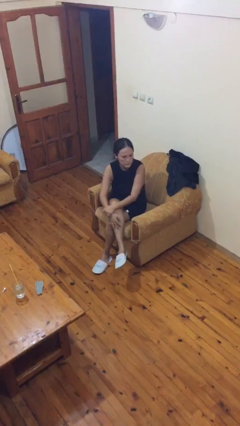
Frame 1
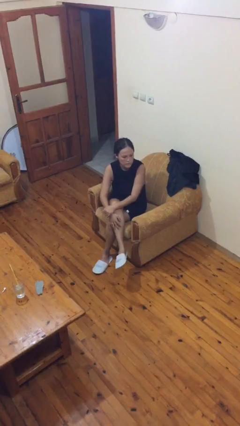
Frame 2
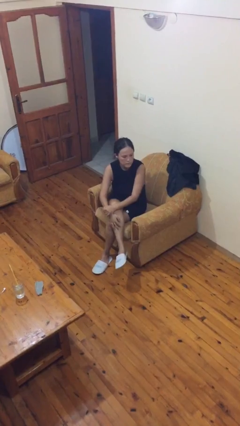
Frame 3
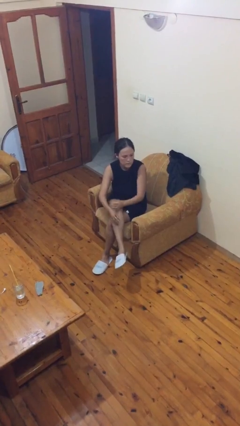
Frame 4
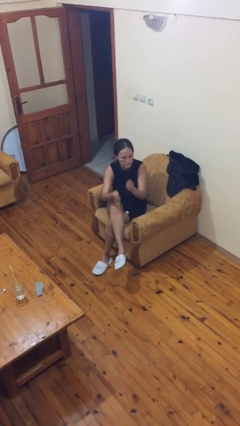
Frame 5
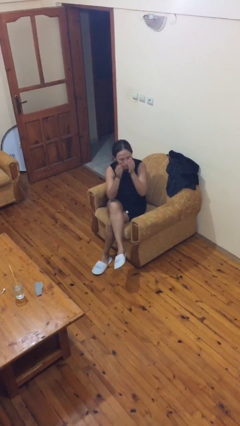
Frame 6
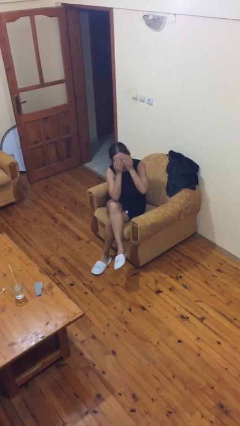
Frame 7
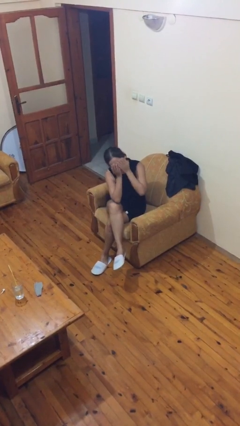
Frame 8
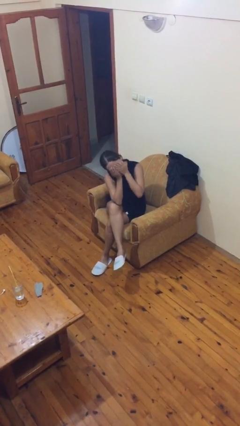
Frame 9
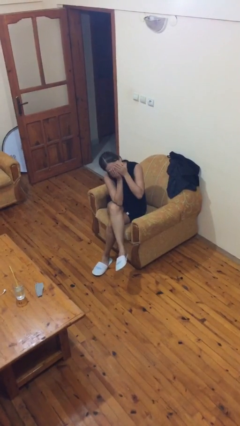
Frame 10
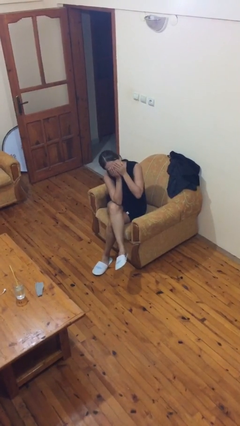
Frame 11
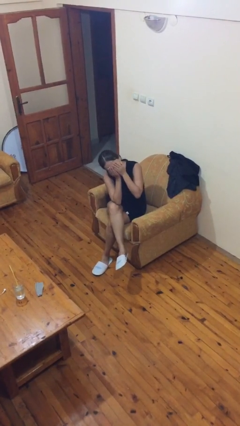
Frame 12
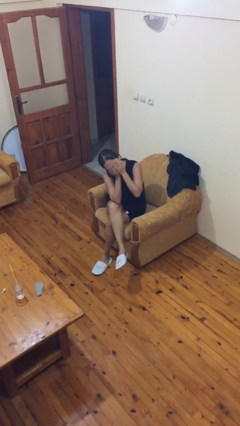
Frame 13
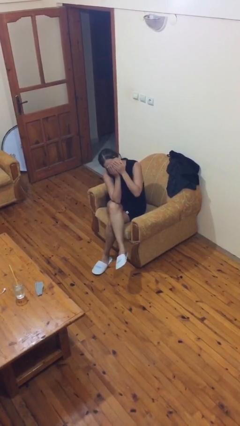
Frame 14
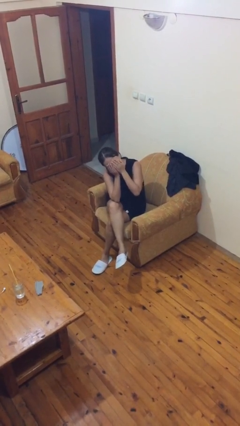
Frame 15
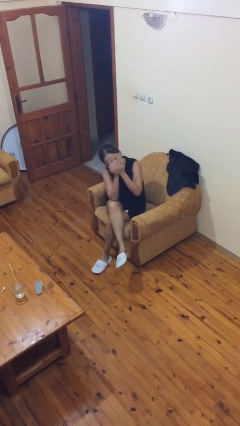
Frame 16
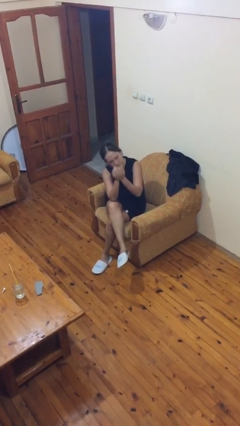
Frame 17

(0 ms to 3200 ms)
person covers face with hands

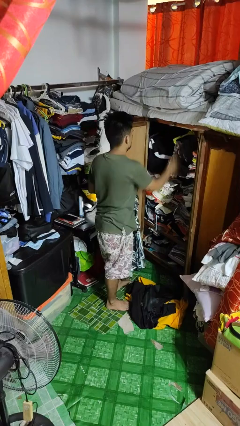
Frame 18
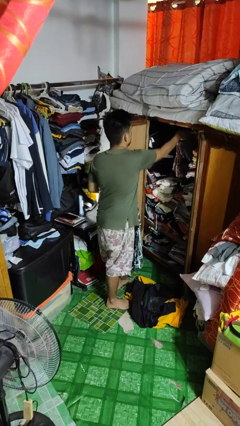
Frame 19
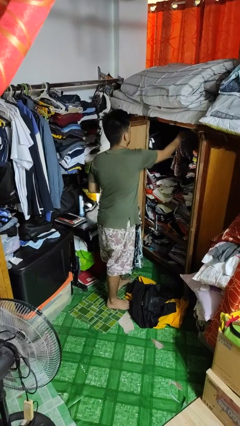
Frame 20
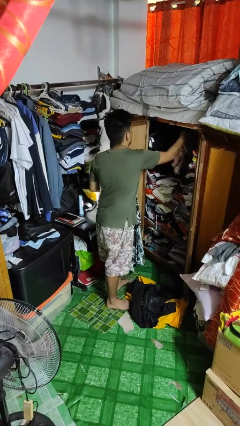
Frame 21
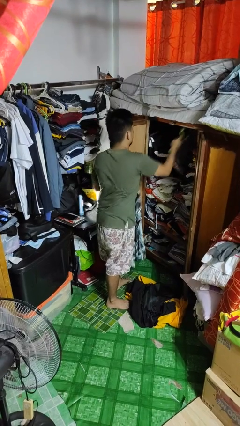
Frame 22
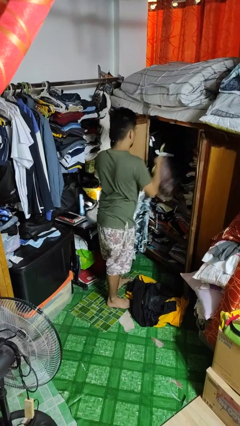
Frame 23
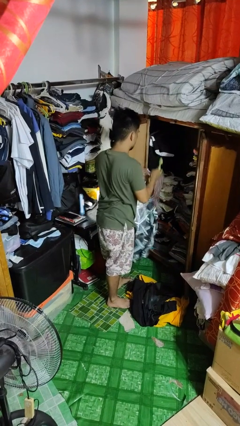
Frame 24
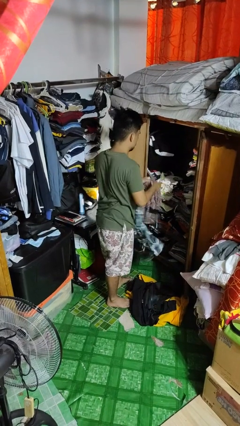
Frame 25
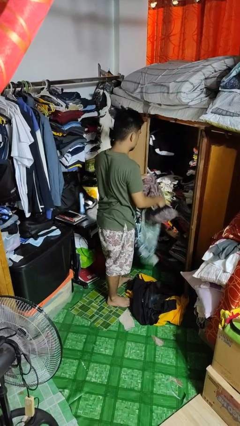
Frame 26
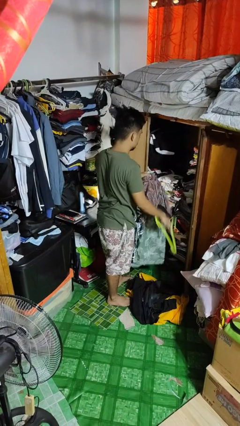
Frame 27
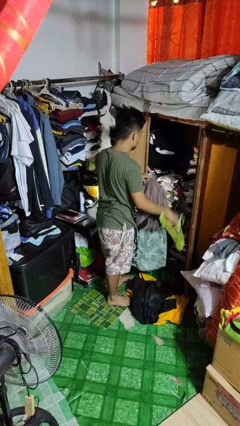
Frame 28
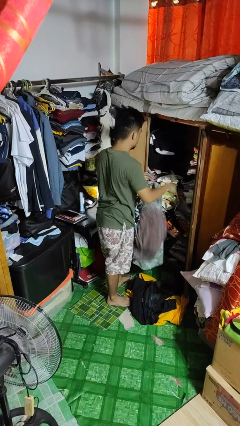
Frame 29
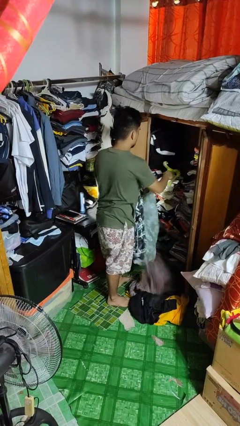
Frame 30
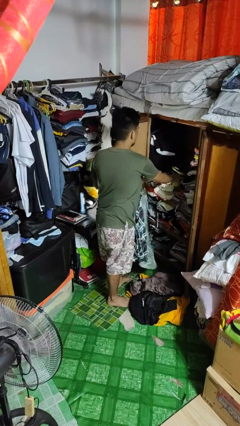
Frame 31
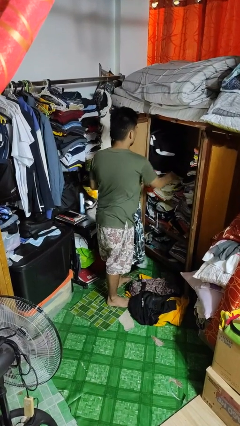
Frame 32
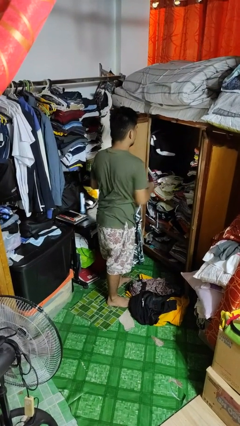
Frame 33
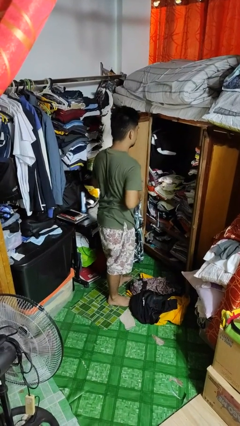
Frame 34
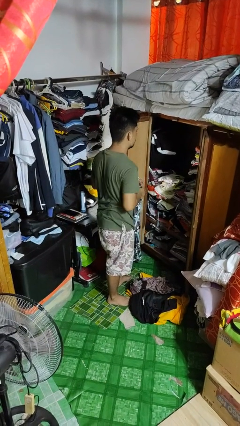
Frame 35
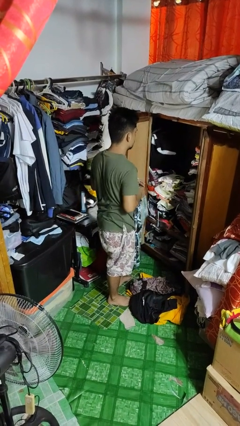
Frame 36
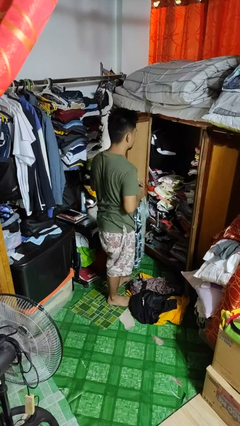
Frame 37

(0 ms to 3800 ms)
person takes clothes from closet

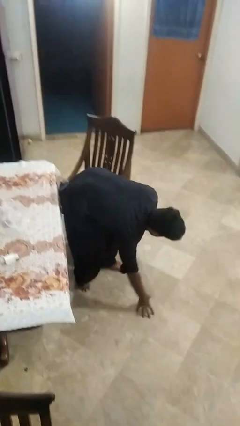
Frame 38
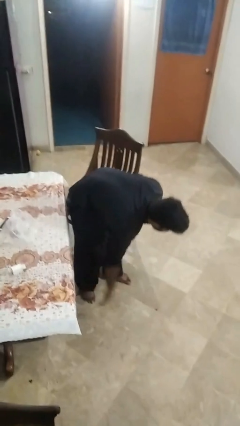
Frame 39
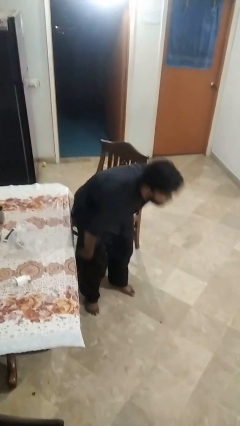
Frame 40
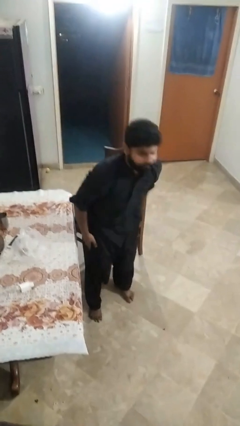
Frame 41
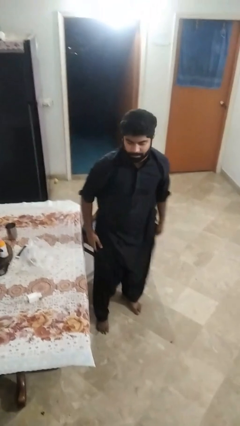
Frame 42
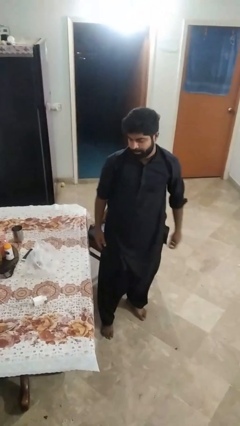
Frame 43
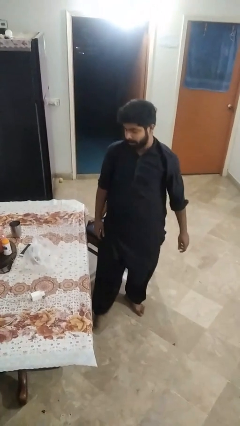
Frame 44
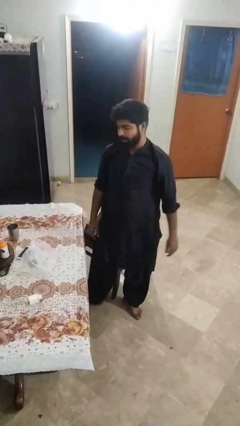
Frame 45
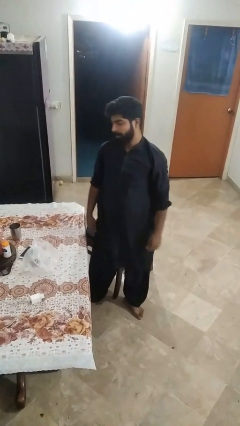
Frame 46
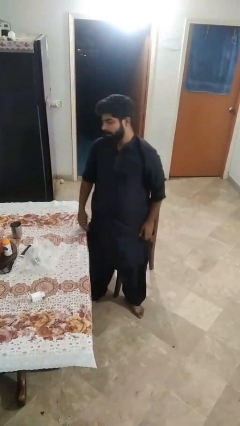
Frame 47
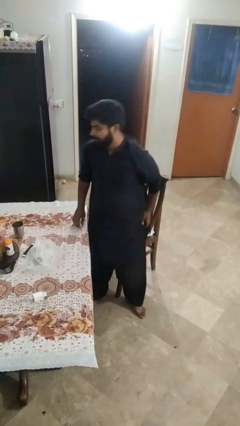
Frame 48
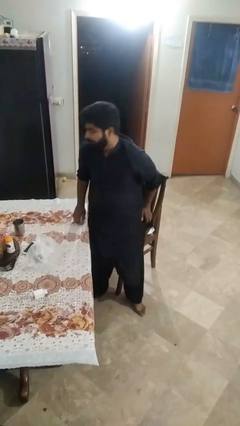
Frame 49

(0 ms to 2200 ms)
person stands up from floor

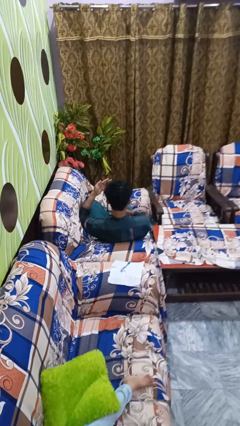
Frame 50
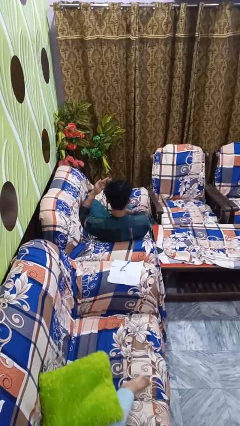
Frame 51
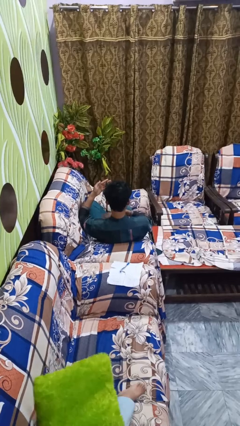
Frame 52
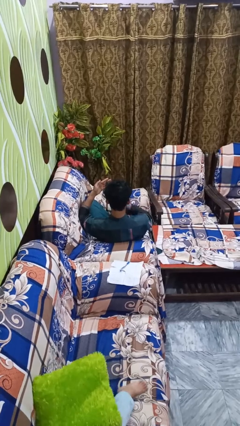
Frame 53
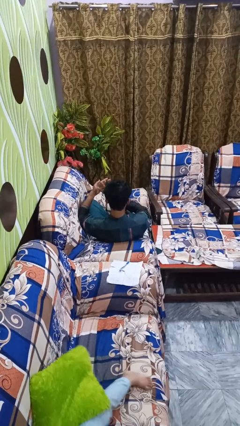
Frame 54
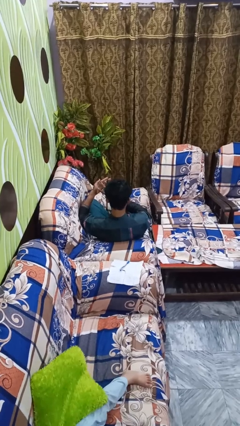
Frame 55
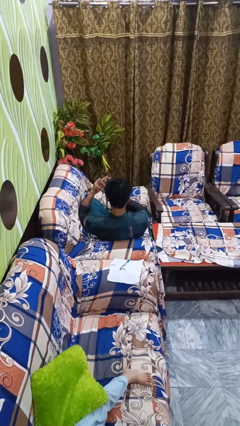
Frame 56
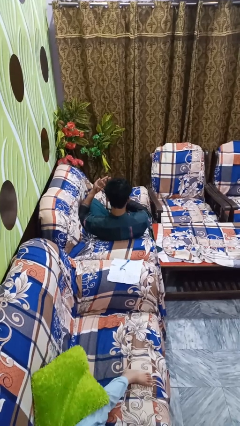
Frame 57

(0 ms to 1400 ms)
person gestures number three

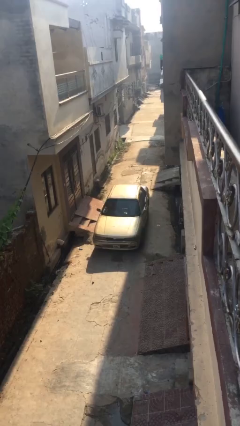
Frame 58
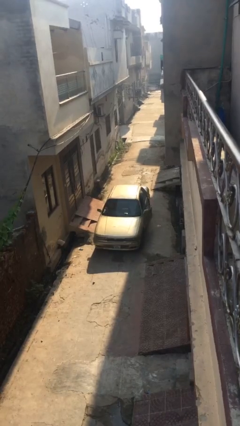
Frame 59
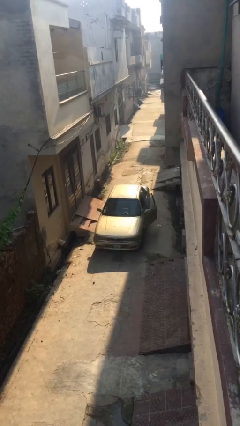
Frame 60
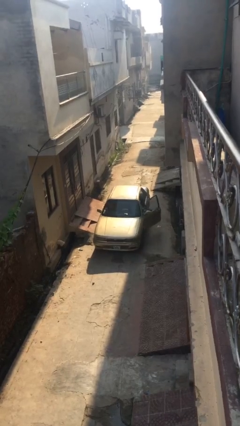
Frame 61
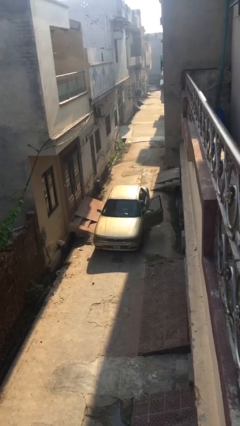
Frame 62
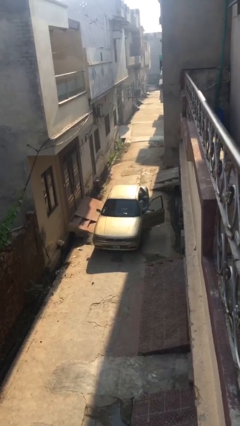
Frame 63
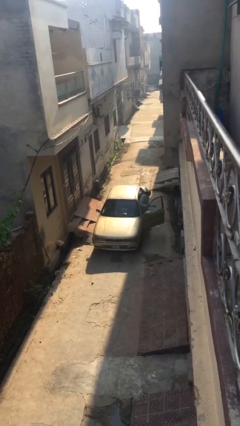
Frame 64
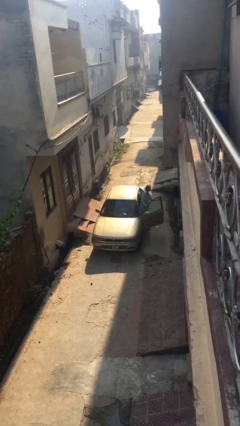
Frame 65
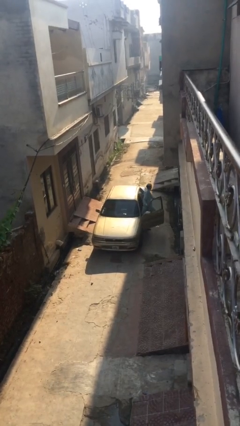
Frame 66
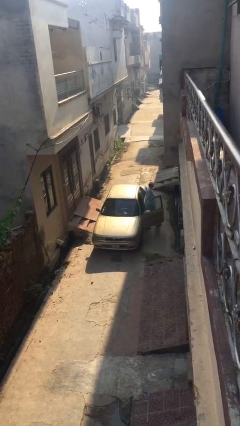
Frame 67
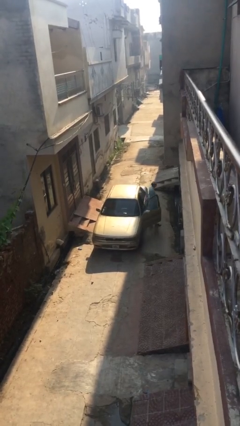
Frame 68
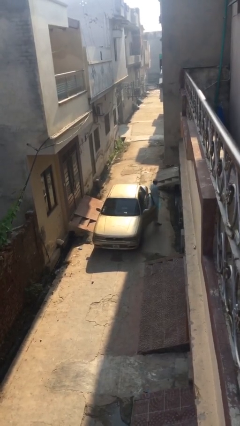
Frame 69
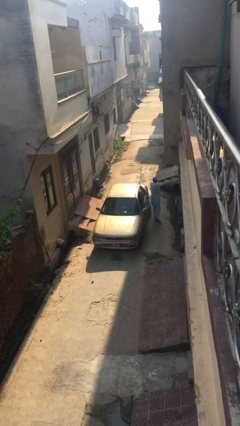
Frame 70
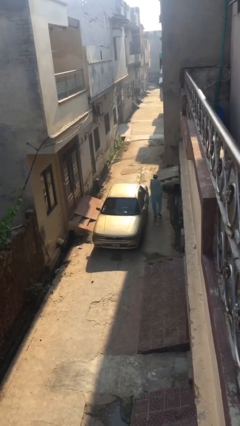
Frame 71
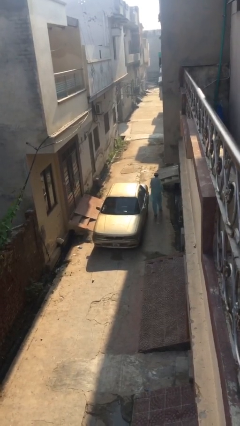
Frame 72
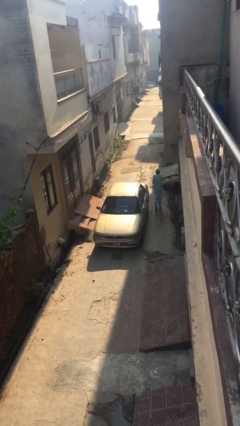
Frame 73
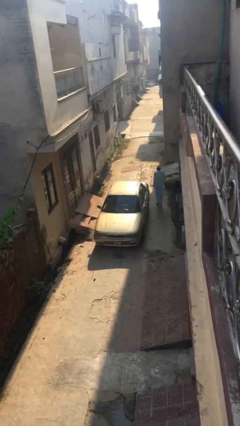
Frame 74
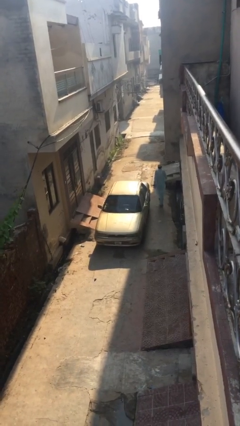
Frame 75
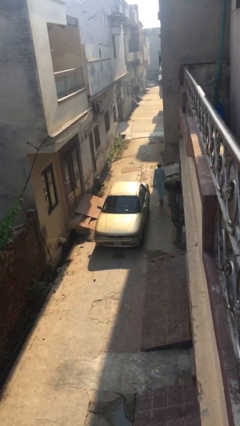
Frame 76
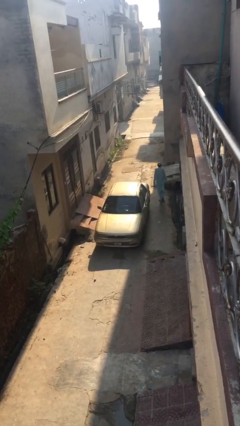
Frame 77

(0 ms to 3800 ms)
car drops off person

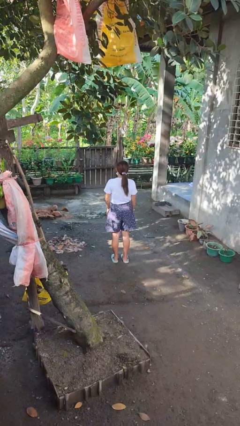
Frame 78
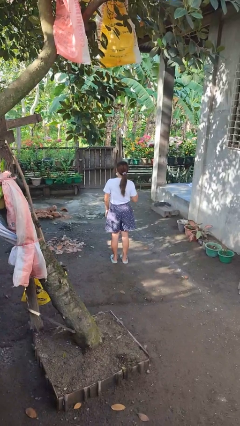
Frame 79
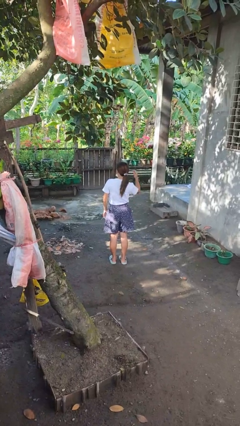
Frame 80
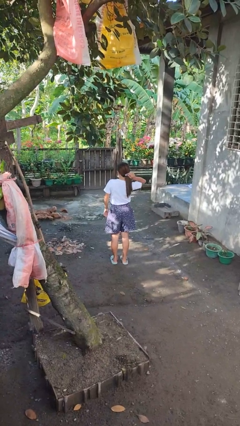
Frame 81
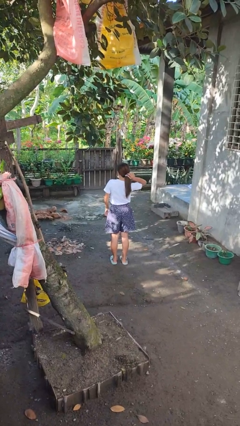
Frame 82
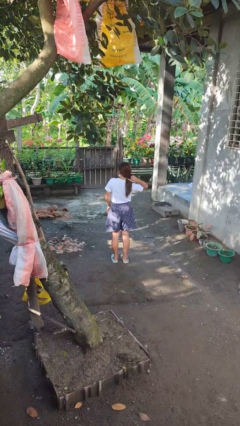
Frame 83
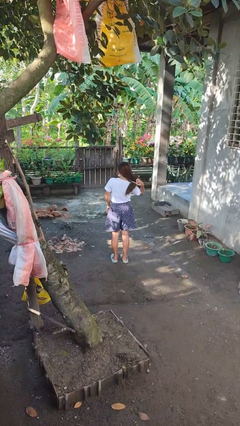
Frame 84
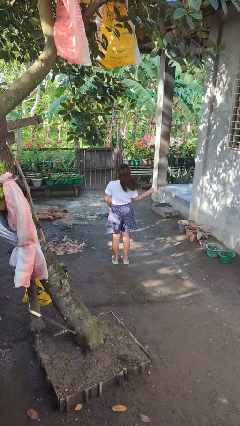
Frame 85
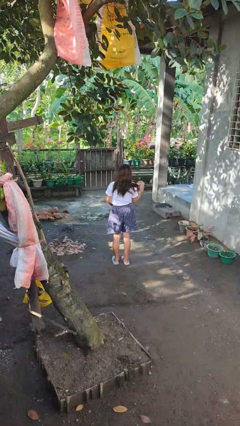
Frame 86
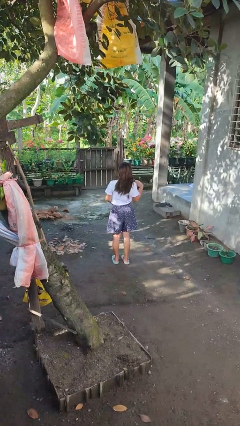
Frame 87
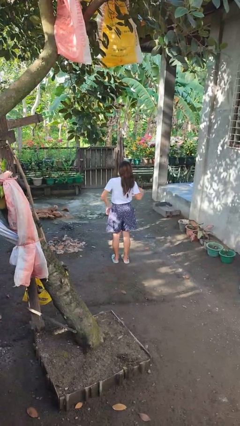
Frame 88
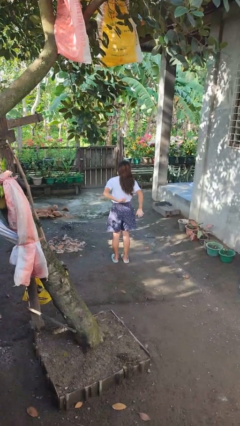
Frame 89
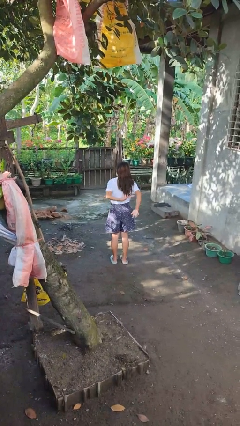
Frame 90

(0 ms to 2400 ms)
person takes off hairtie

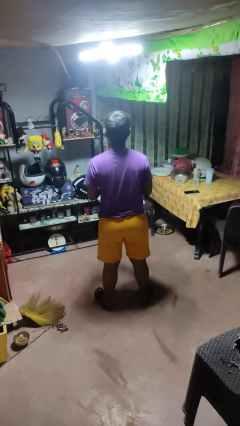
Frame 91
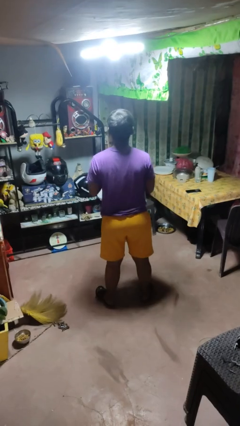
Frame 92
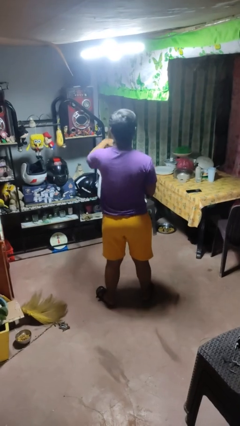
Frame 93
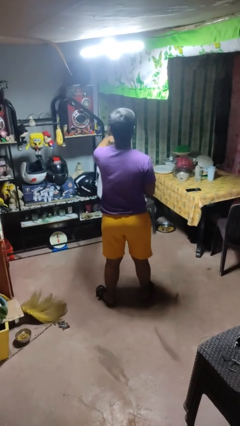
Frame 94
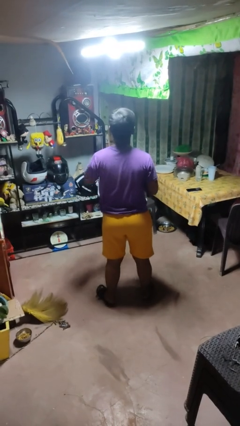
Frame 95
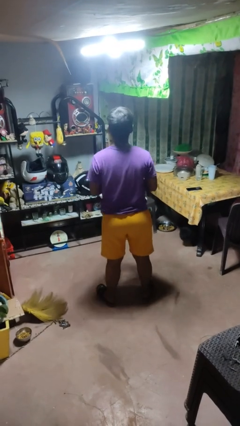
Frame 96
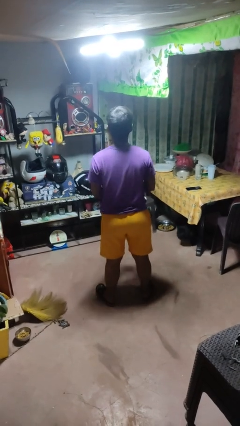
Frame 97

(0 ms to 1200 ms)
person punches
